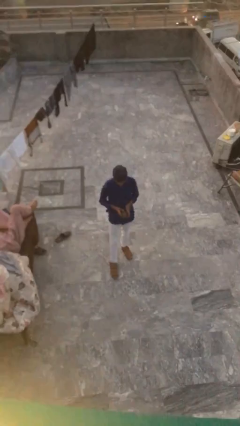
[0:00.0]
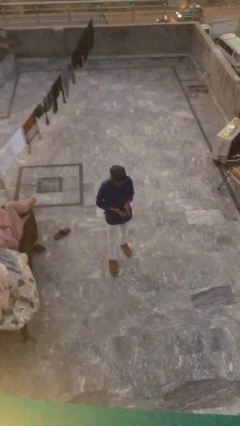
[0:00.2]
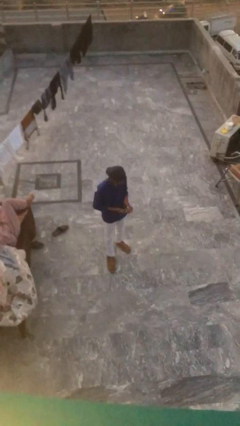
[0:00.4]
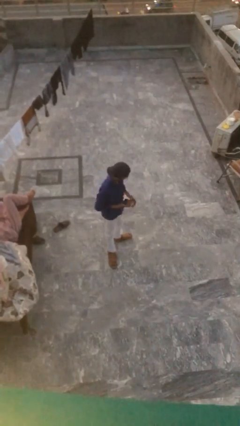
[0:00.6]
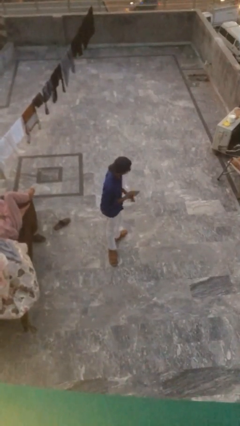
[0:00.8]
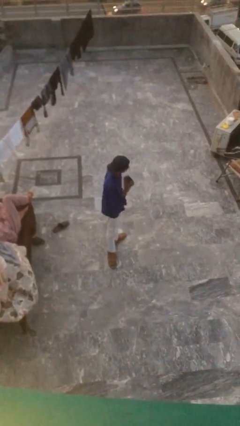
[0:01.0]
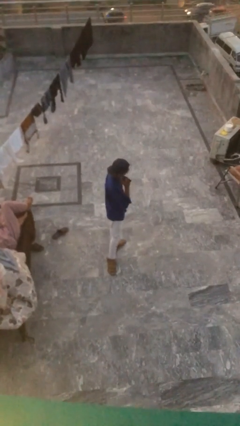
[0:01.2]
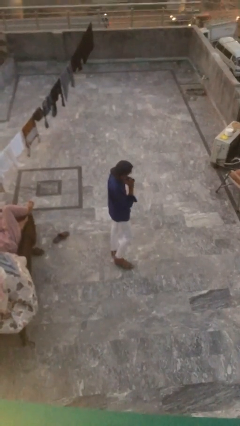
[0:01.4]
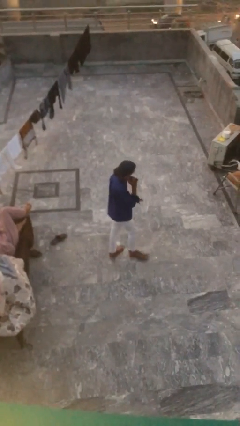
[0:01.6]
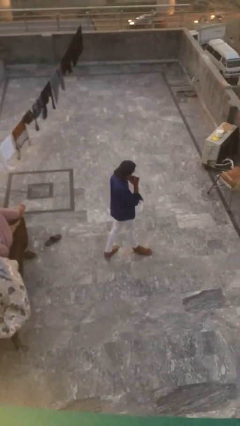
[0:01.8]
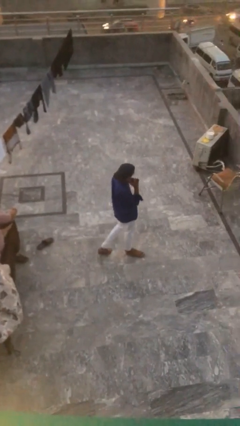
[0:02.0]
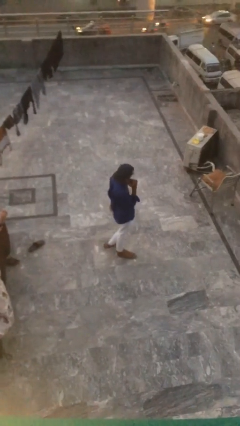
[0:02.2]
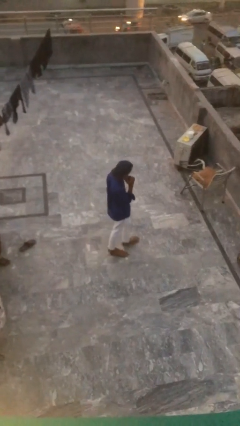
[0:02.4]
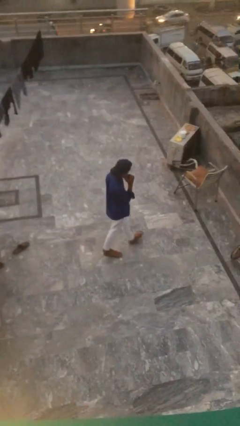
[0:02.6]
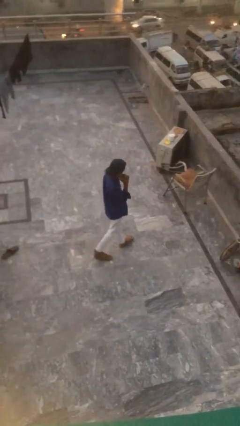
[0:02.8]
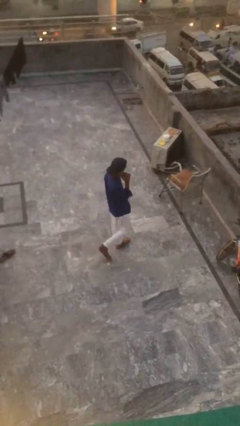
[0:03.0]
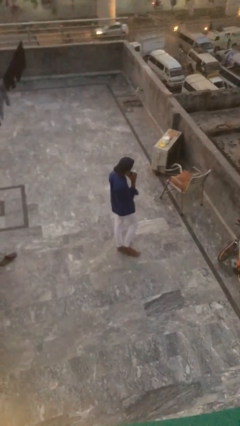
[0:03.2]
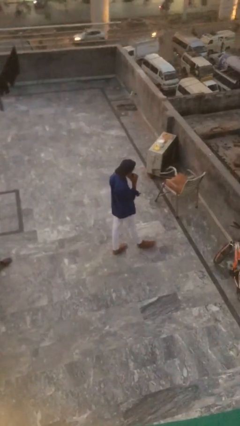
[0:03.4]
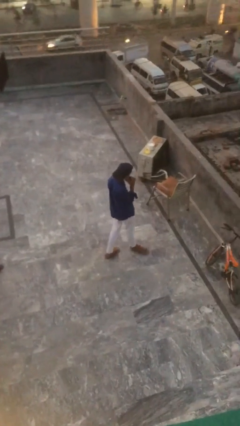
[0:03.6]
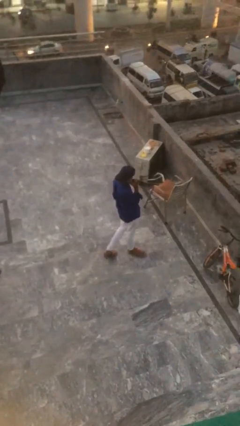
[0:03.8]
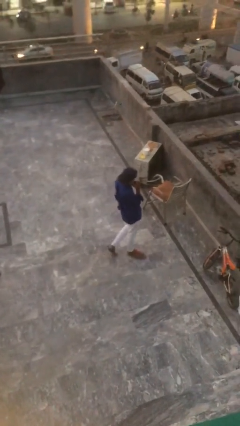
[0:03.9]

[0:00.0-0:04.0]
person talks on phone

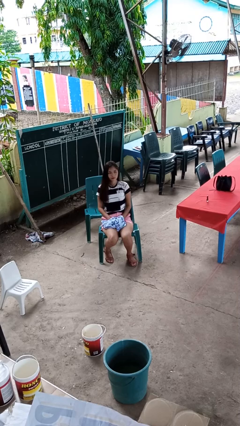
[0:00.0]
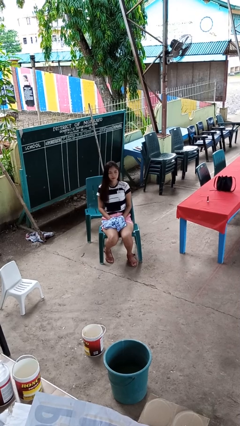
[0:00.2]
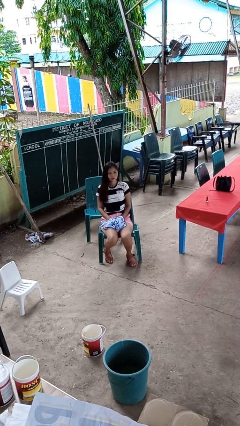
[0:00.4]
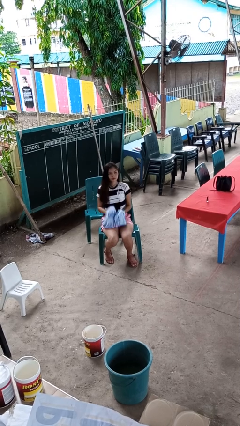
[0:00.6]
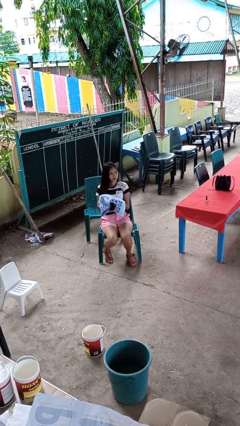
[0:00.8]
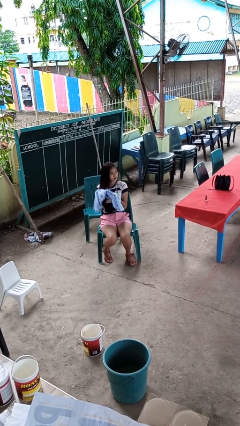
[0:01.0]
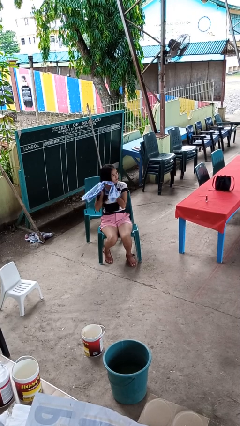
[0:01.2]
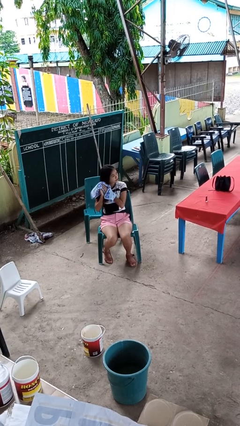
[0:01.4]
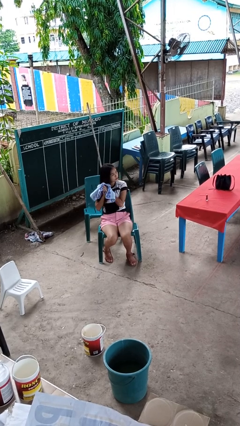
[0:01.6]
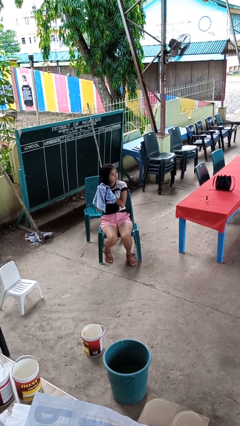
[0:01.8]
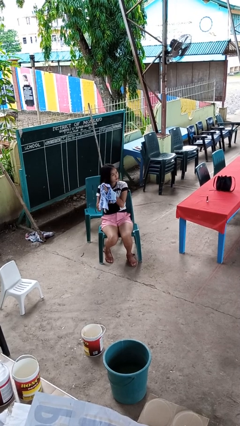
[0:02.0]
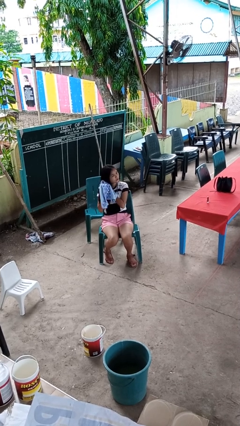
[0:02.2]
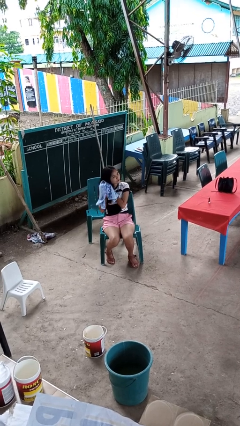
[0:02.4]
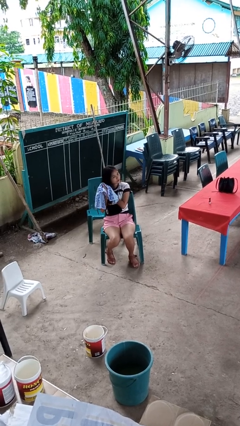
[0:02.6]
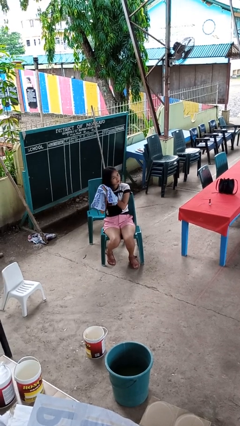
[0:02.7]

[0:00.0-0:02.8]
person dries hair with towel

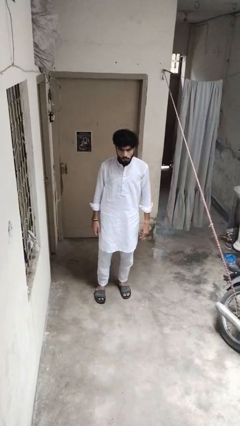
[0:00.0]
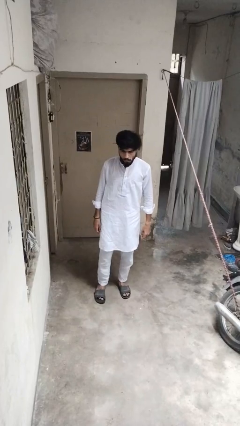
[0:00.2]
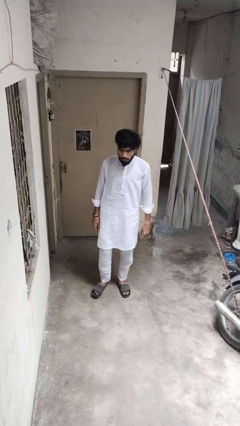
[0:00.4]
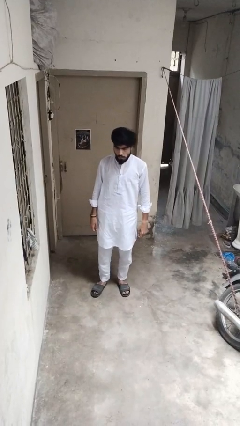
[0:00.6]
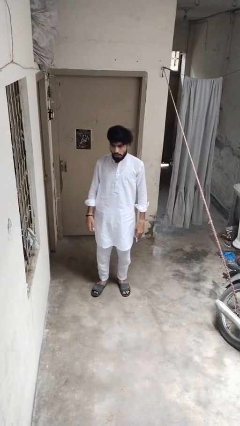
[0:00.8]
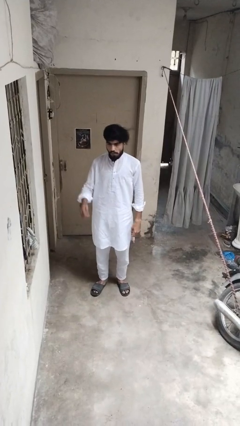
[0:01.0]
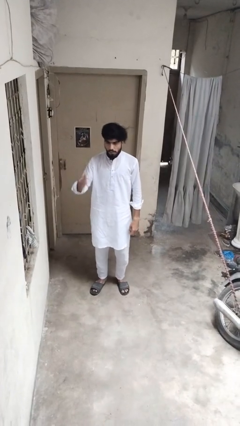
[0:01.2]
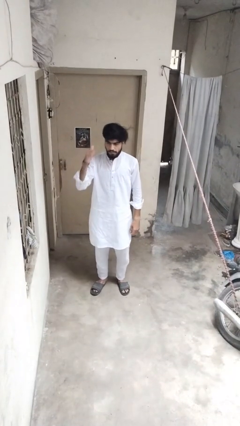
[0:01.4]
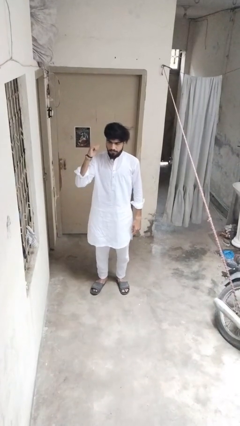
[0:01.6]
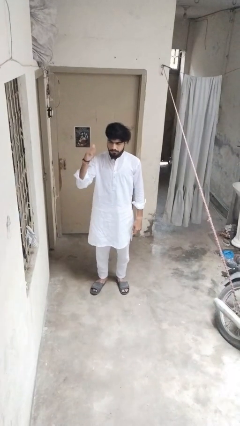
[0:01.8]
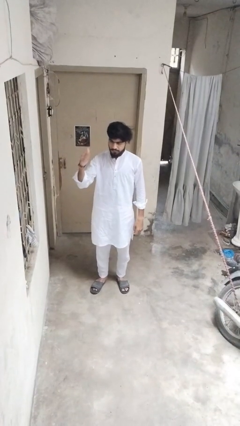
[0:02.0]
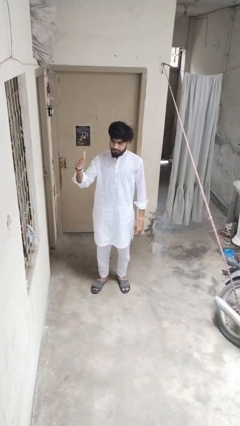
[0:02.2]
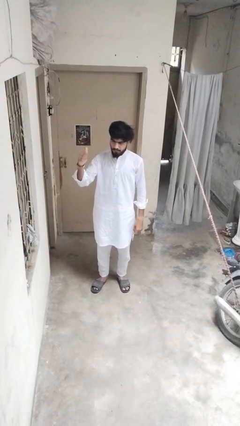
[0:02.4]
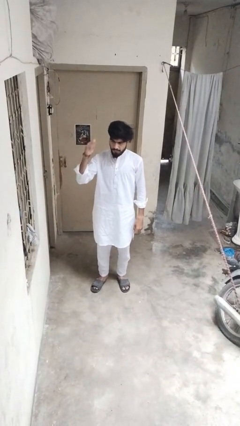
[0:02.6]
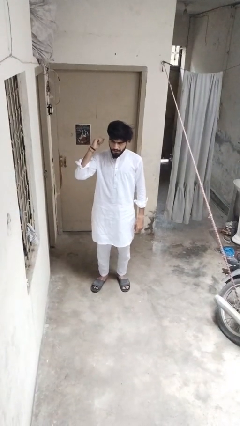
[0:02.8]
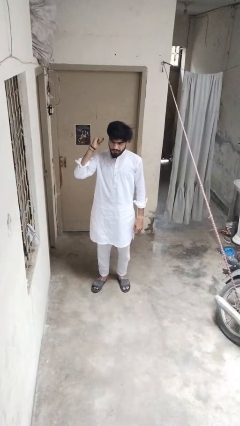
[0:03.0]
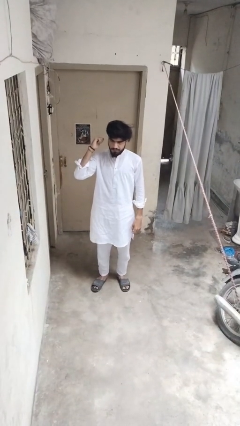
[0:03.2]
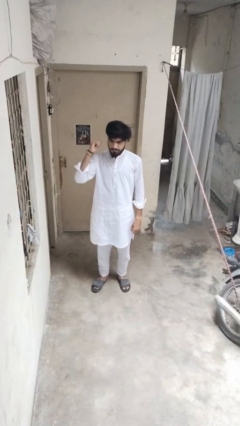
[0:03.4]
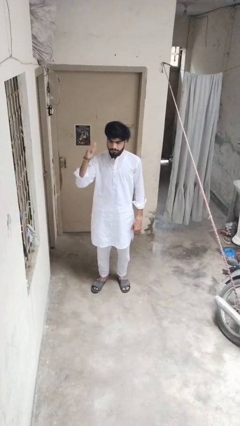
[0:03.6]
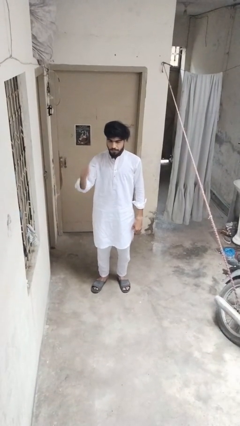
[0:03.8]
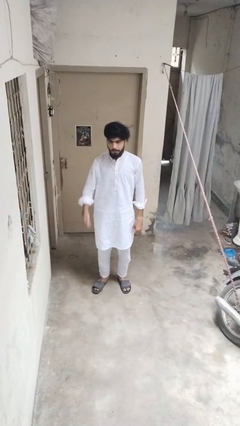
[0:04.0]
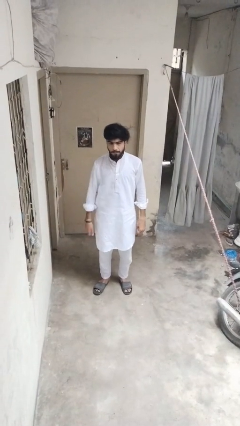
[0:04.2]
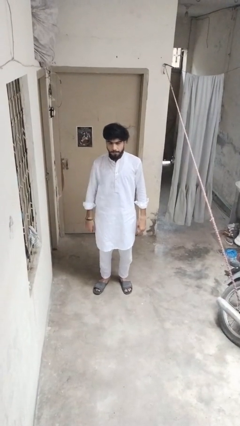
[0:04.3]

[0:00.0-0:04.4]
person gestures behind me

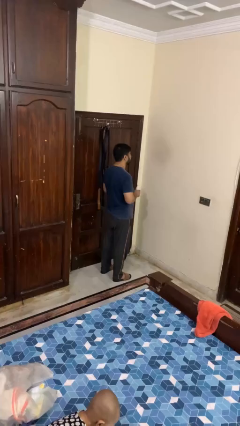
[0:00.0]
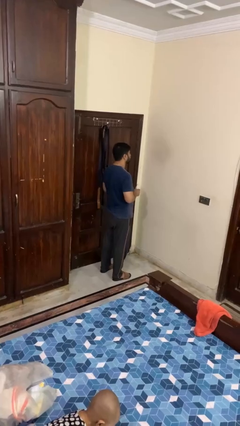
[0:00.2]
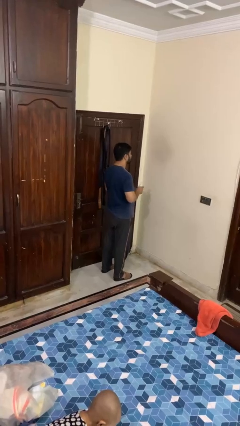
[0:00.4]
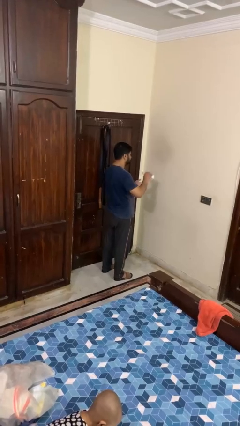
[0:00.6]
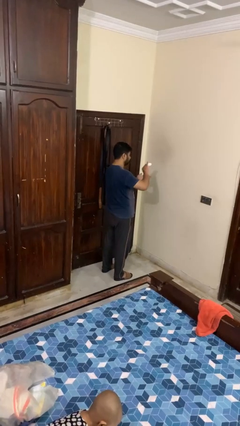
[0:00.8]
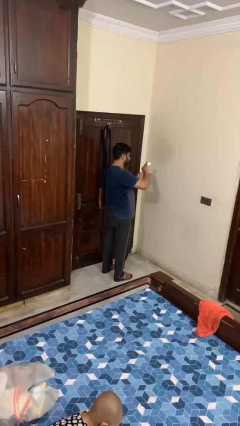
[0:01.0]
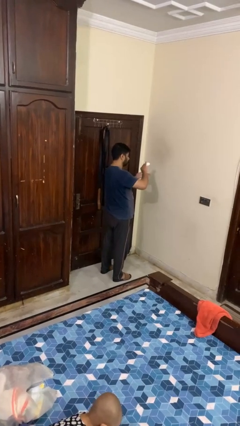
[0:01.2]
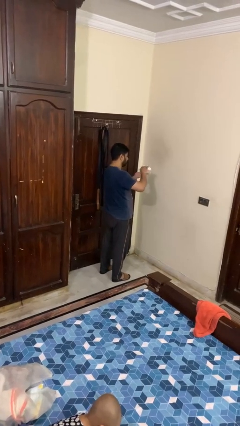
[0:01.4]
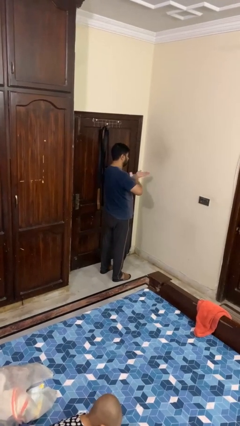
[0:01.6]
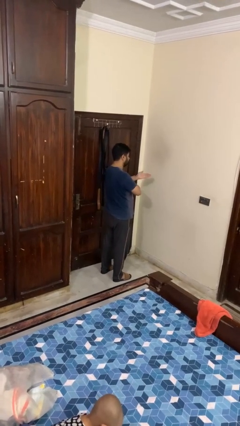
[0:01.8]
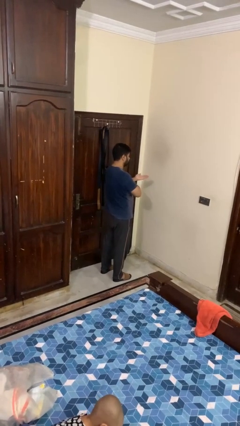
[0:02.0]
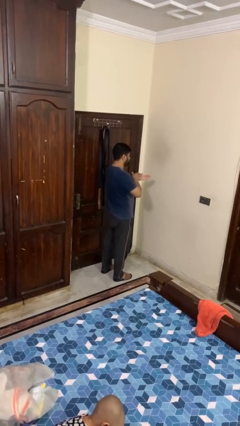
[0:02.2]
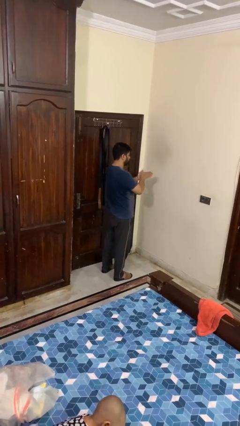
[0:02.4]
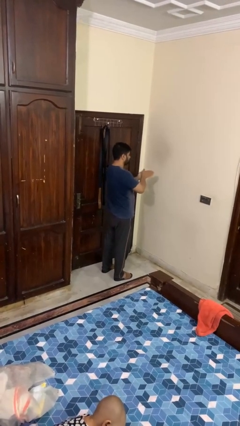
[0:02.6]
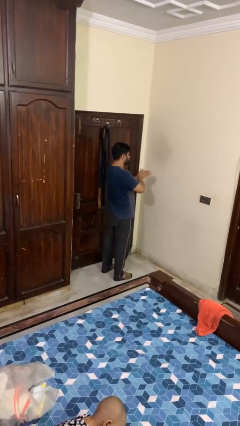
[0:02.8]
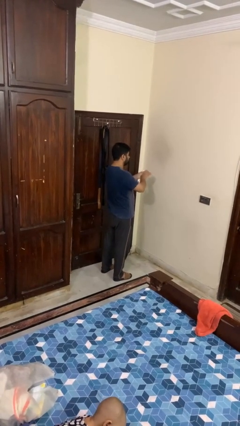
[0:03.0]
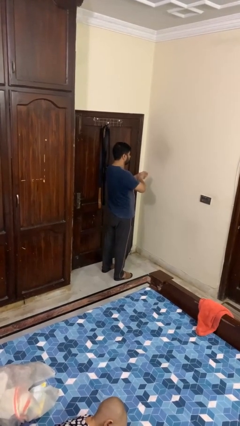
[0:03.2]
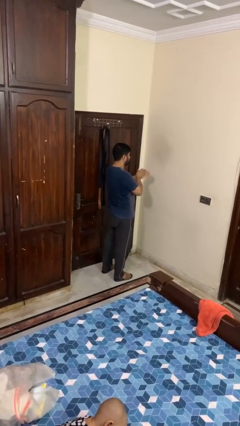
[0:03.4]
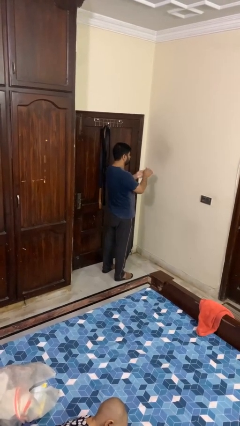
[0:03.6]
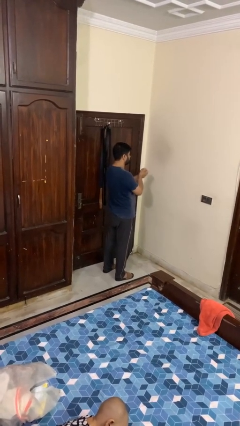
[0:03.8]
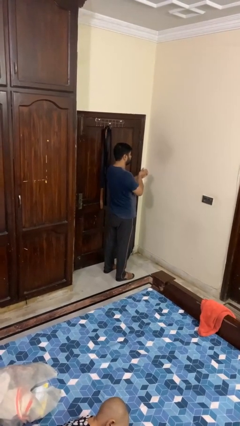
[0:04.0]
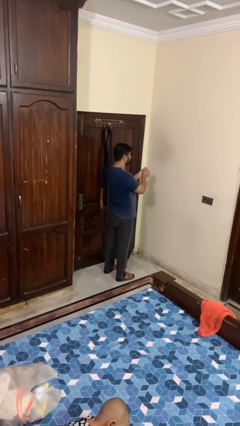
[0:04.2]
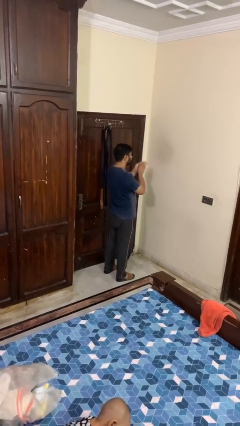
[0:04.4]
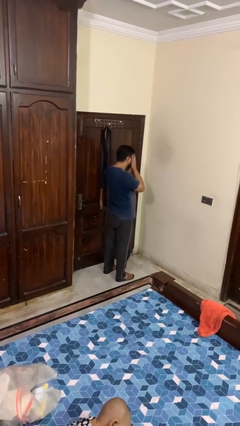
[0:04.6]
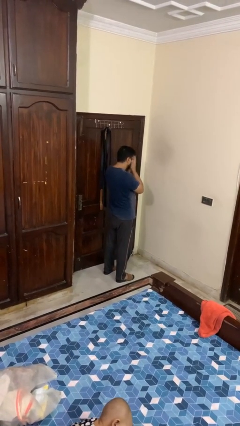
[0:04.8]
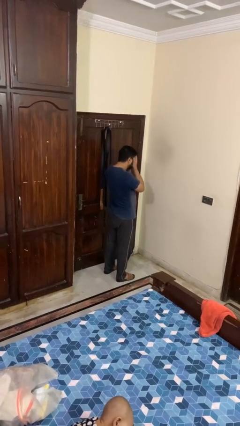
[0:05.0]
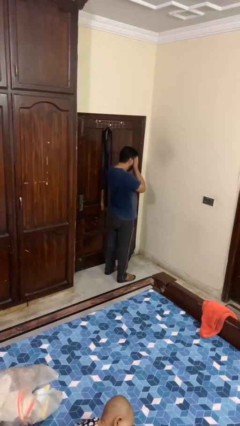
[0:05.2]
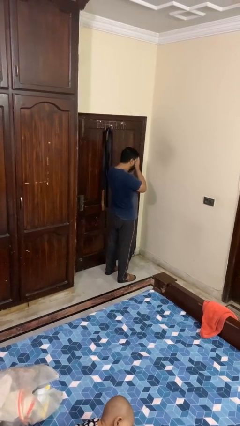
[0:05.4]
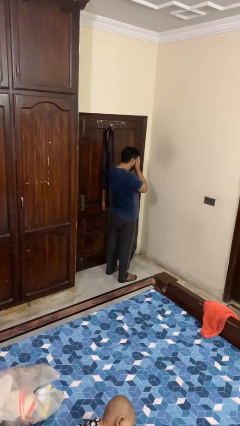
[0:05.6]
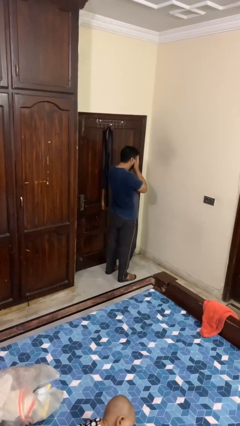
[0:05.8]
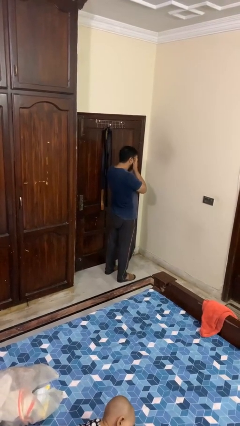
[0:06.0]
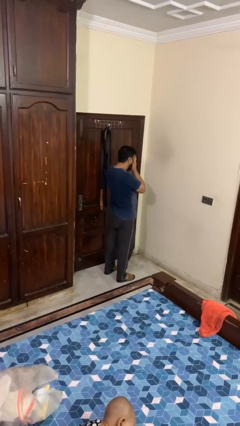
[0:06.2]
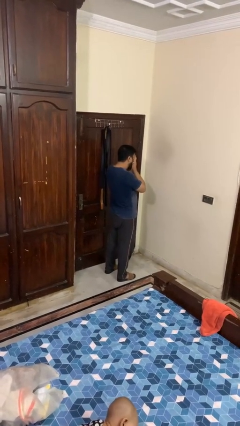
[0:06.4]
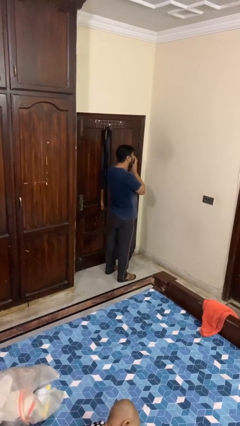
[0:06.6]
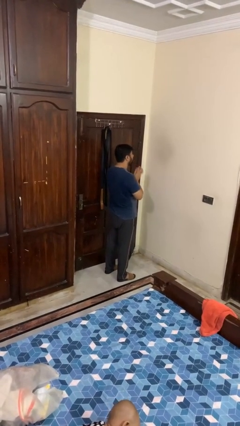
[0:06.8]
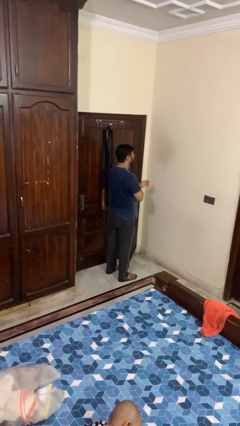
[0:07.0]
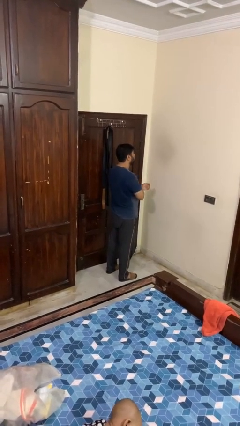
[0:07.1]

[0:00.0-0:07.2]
person applies facial moisturizer
